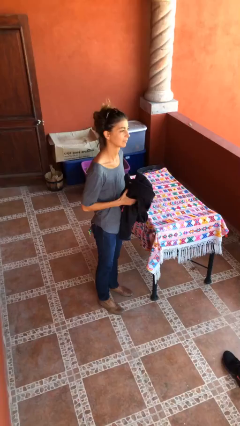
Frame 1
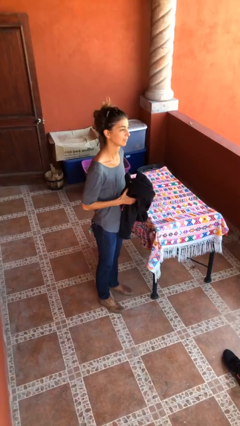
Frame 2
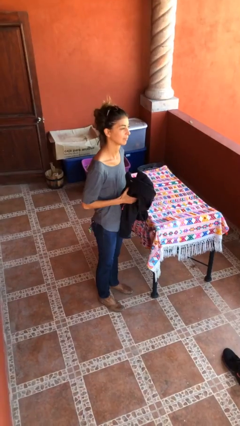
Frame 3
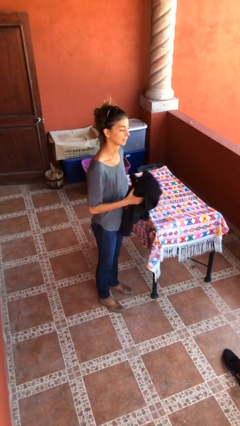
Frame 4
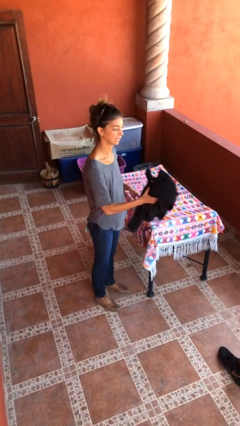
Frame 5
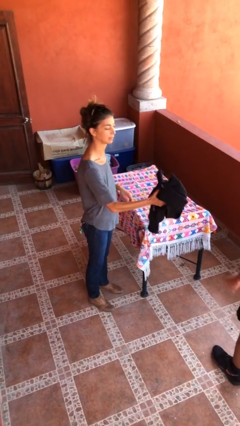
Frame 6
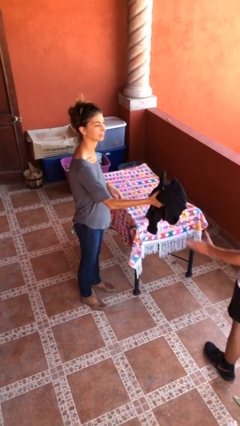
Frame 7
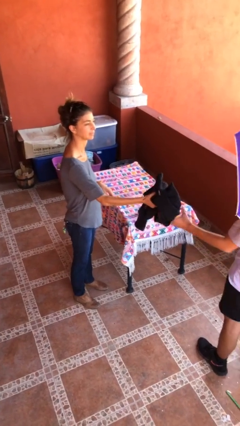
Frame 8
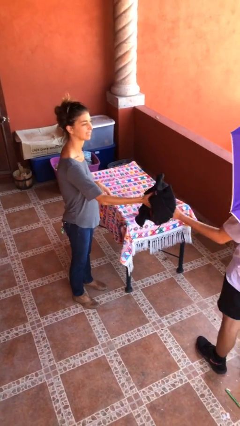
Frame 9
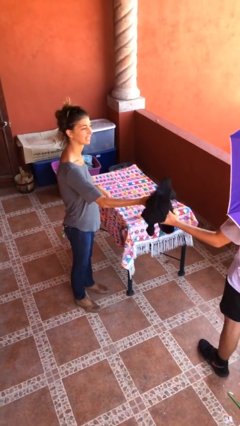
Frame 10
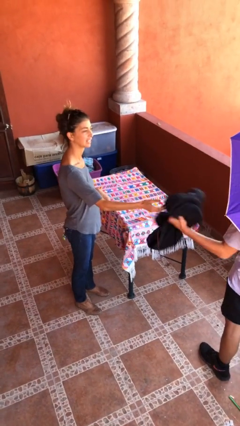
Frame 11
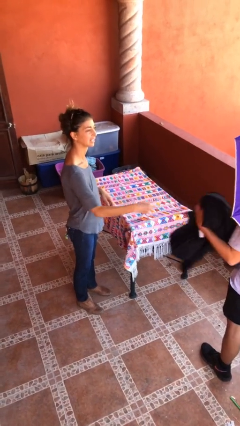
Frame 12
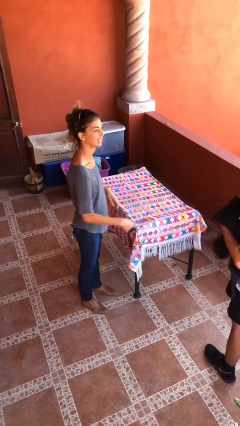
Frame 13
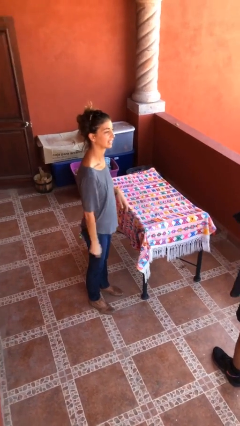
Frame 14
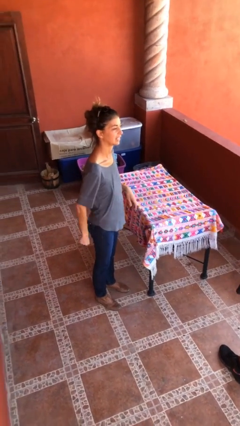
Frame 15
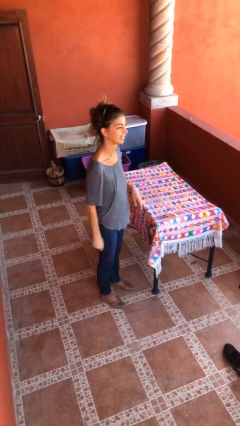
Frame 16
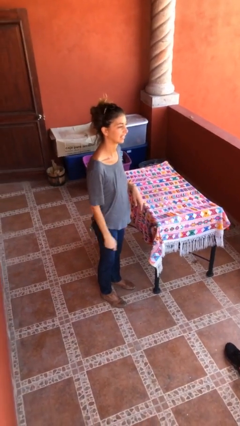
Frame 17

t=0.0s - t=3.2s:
person transfers object to person

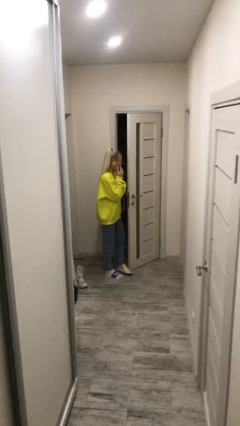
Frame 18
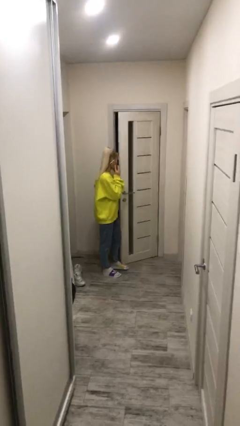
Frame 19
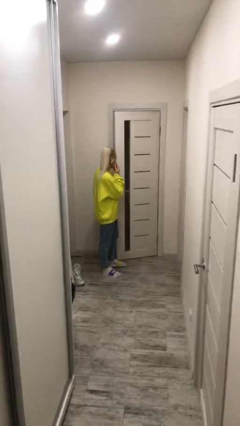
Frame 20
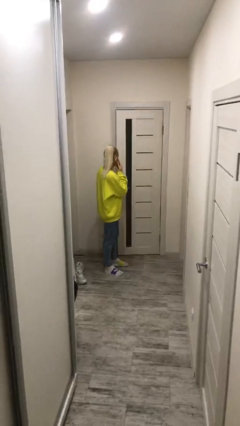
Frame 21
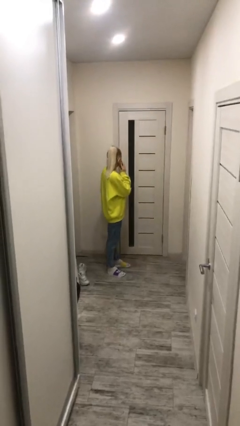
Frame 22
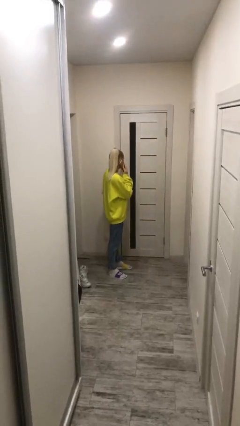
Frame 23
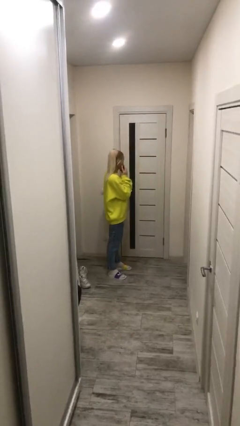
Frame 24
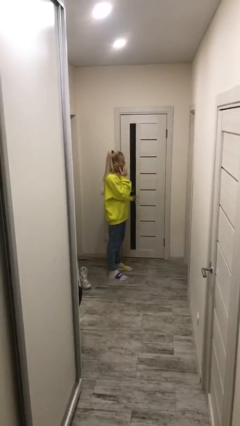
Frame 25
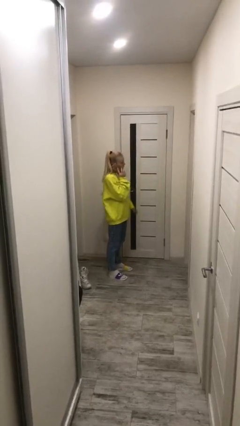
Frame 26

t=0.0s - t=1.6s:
person closes facility door

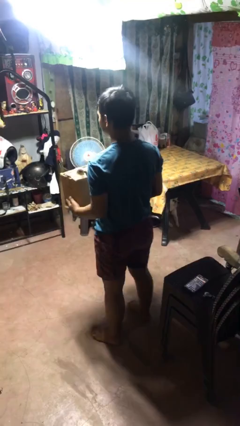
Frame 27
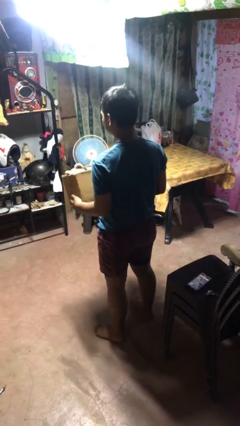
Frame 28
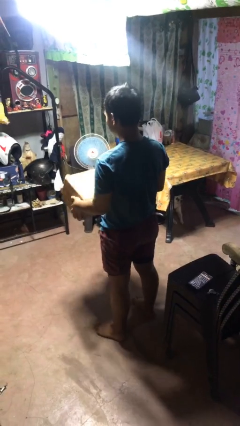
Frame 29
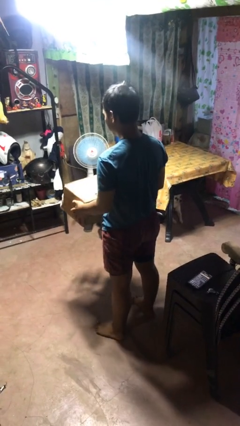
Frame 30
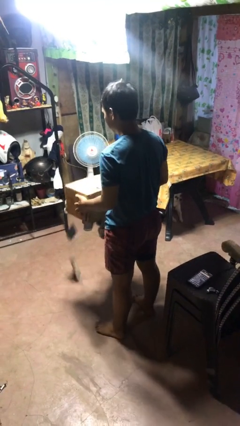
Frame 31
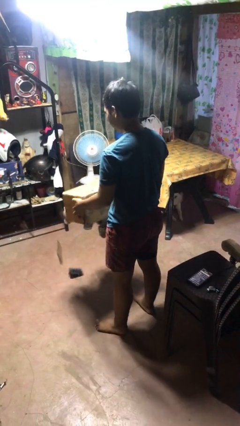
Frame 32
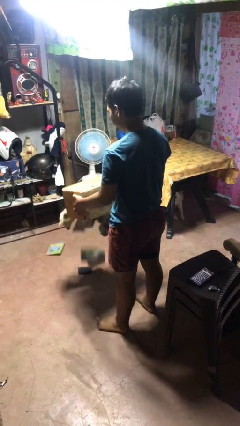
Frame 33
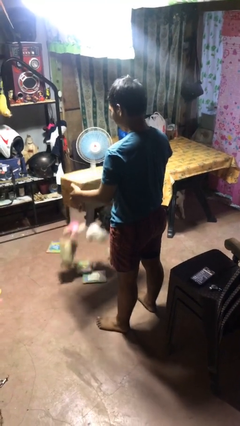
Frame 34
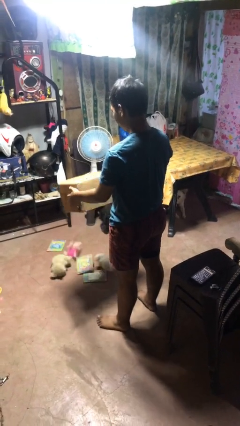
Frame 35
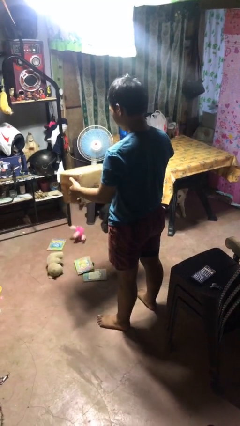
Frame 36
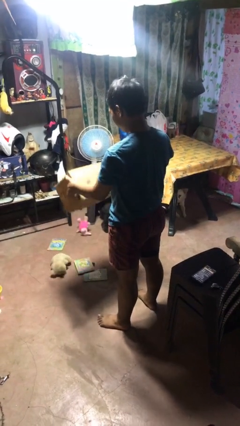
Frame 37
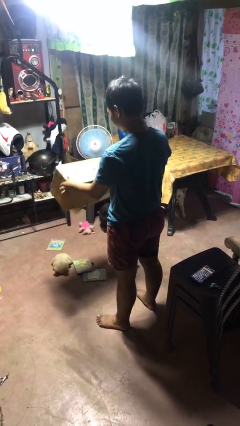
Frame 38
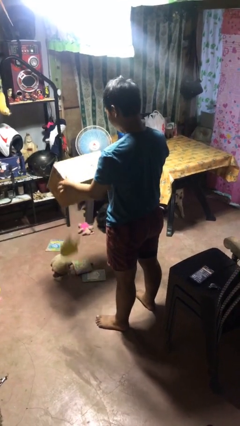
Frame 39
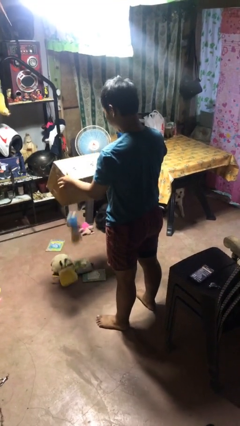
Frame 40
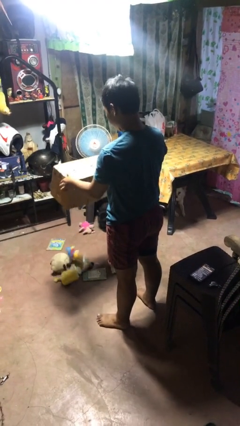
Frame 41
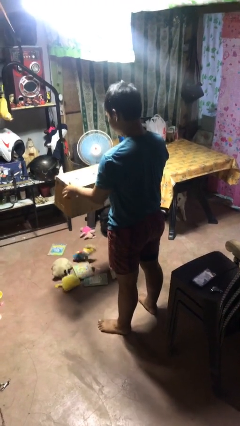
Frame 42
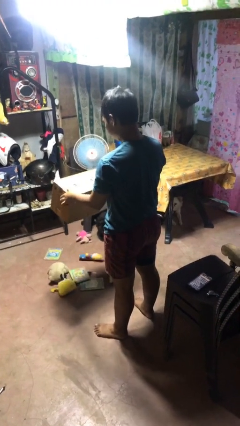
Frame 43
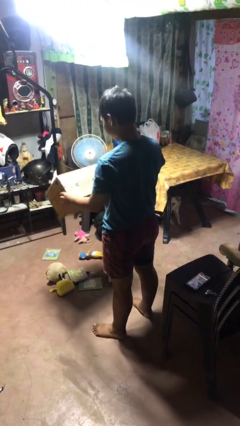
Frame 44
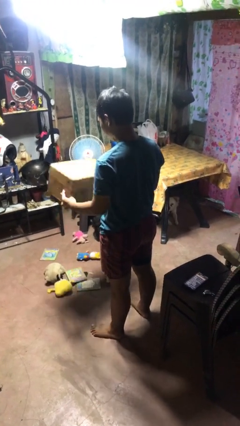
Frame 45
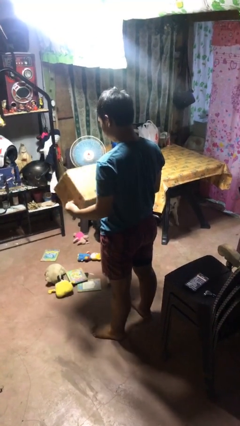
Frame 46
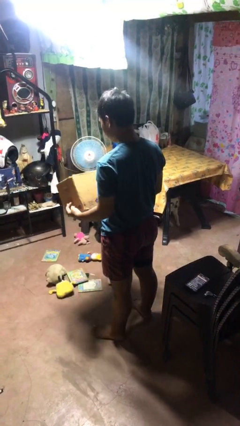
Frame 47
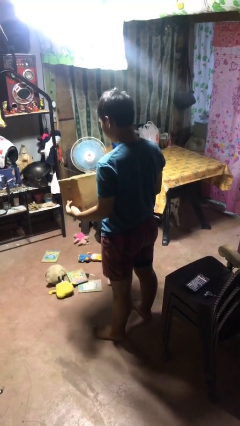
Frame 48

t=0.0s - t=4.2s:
person unloads box onto floor

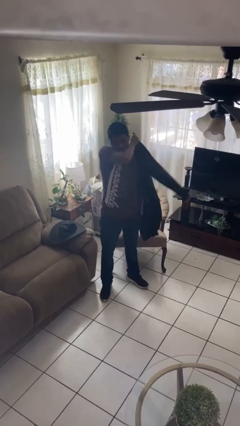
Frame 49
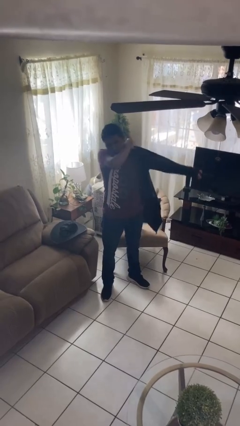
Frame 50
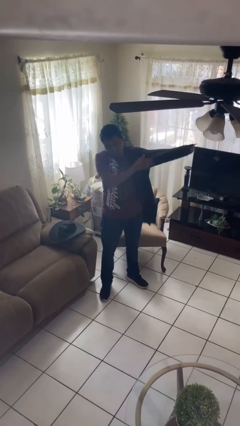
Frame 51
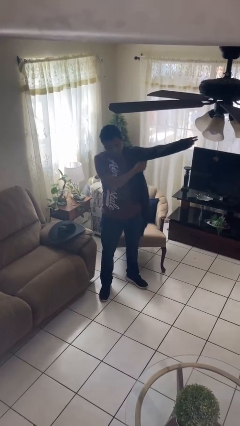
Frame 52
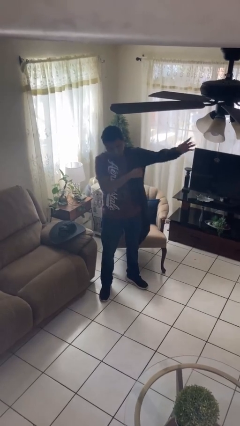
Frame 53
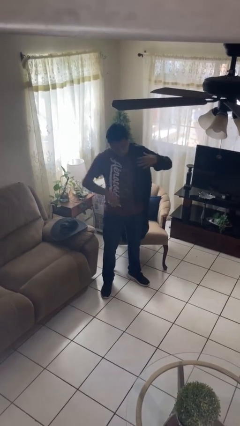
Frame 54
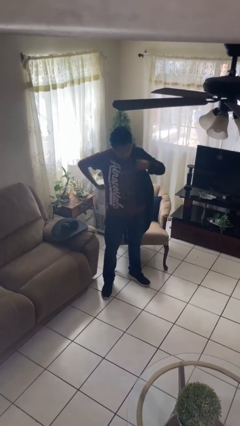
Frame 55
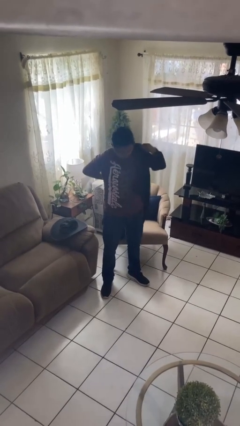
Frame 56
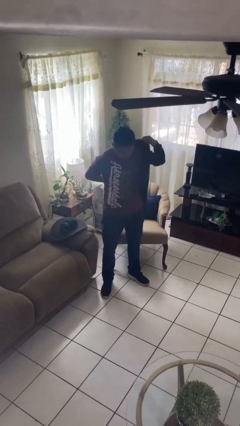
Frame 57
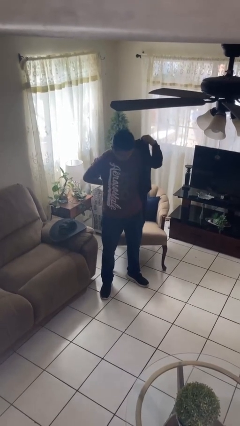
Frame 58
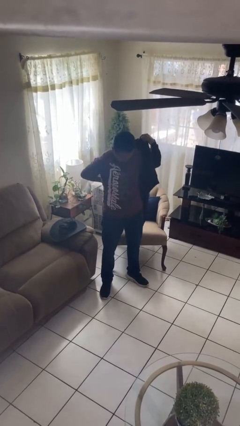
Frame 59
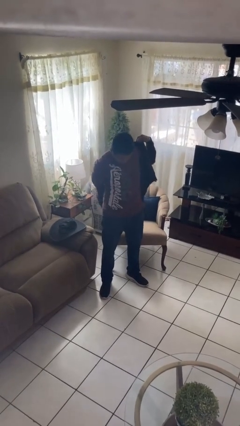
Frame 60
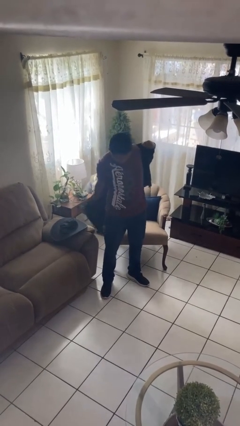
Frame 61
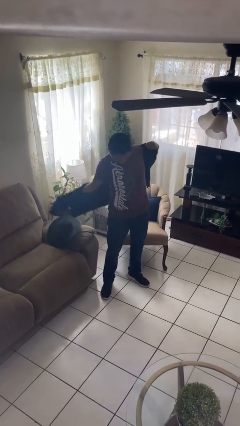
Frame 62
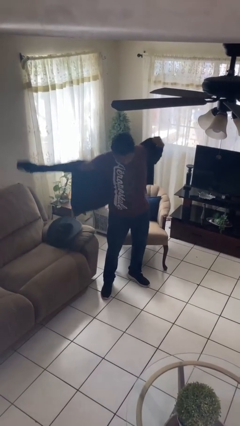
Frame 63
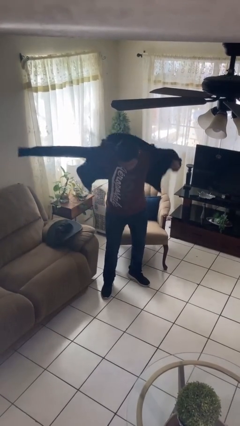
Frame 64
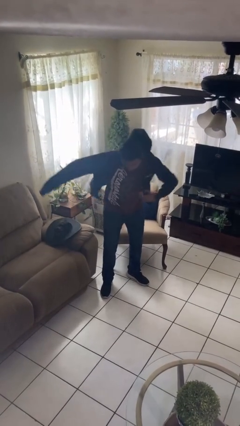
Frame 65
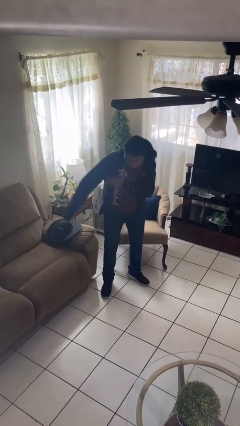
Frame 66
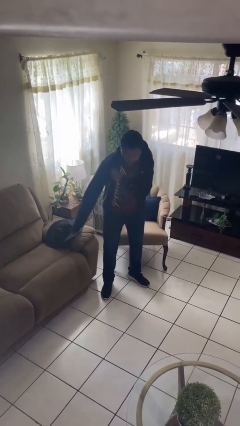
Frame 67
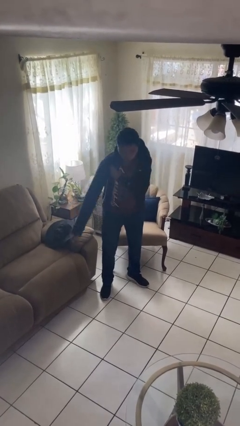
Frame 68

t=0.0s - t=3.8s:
person puts on jacket

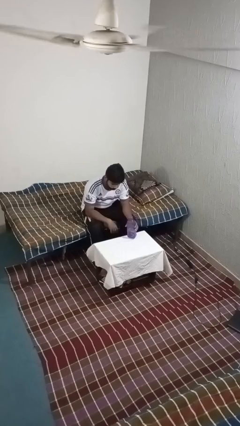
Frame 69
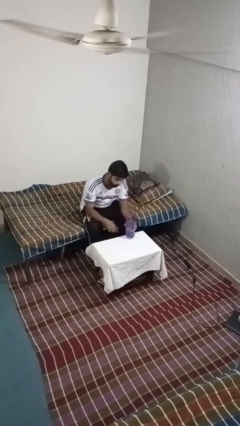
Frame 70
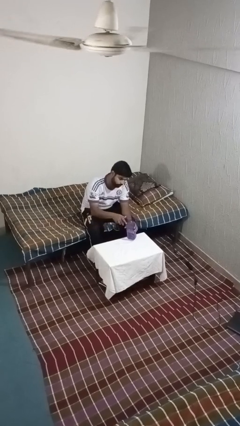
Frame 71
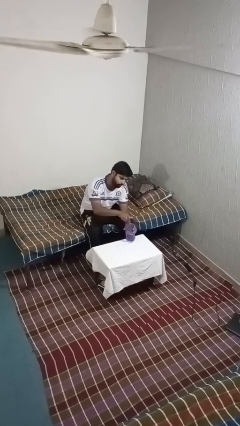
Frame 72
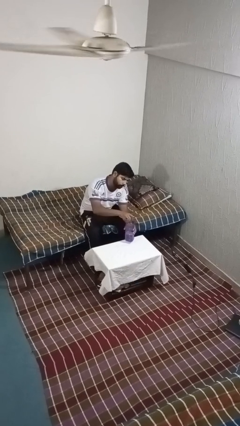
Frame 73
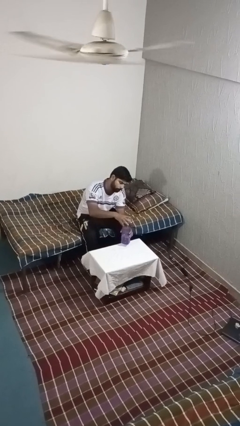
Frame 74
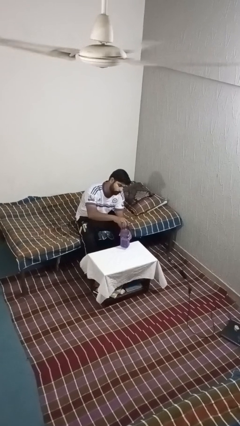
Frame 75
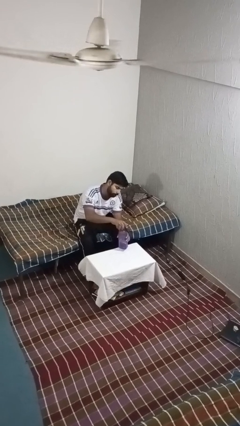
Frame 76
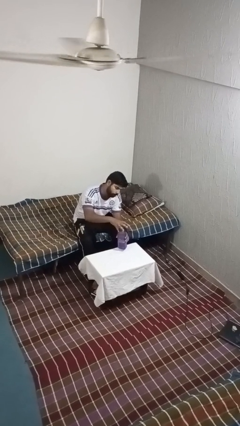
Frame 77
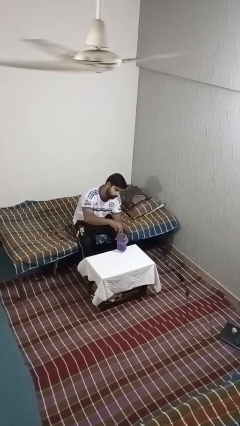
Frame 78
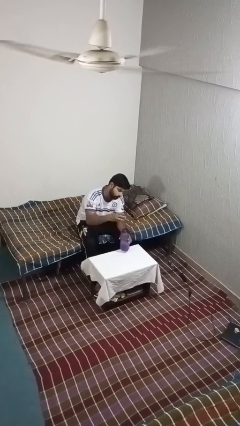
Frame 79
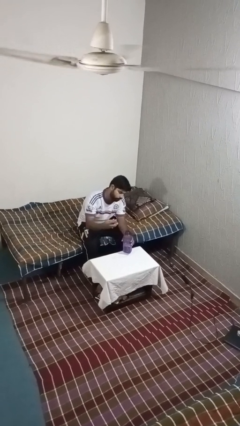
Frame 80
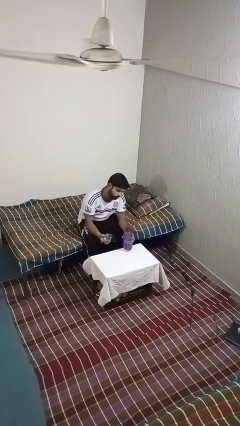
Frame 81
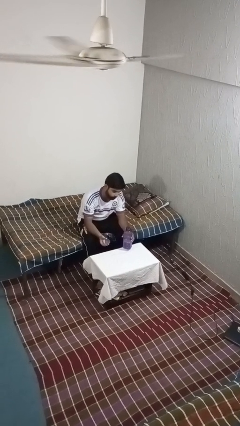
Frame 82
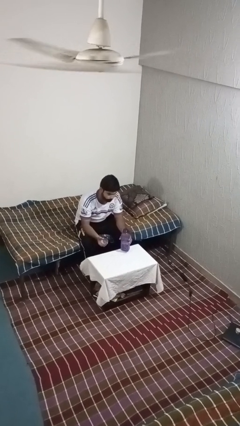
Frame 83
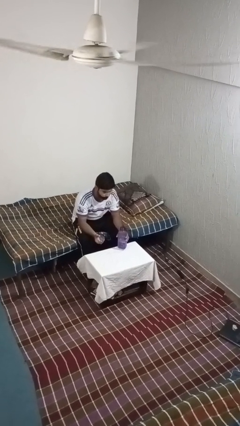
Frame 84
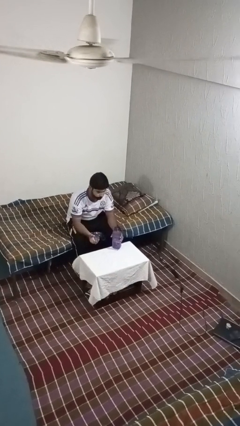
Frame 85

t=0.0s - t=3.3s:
person unscrews lid from bottle

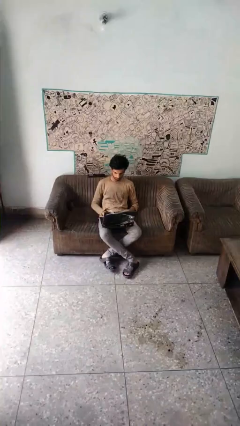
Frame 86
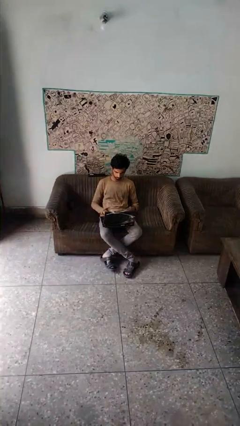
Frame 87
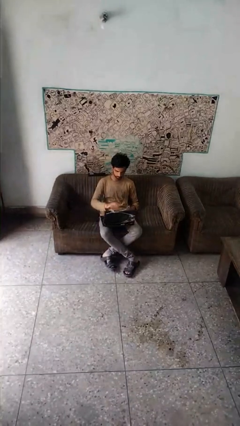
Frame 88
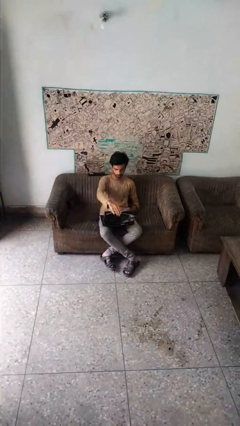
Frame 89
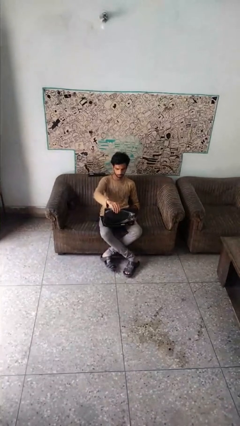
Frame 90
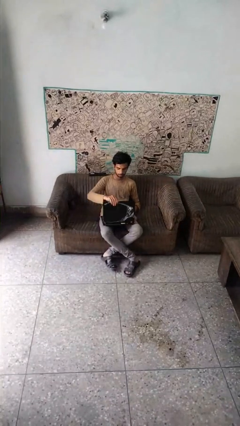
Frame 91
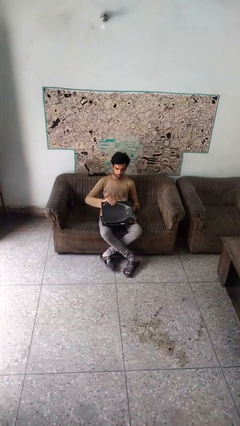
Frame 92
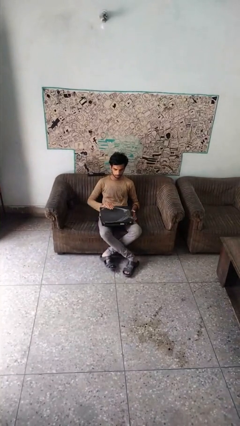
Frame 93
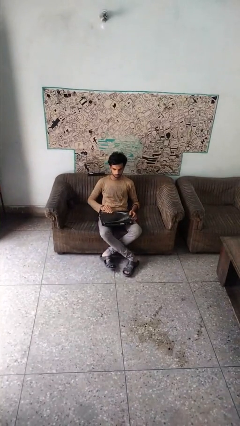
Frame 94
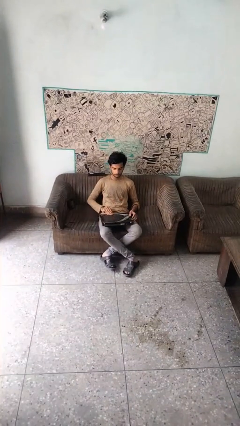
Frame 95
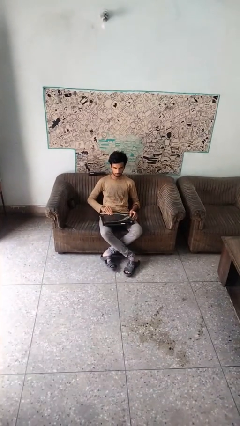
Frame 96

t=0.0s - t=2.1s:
person closes laptop
